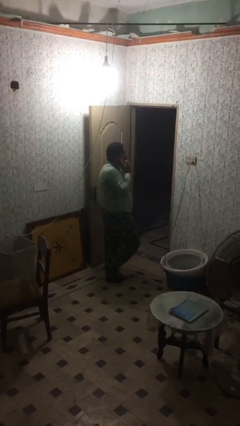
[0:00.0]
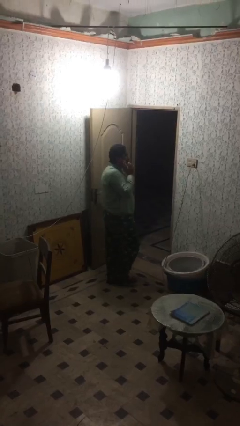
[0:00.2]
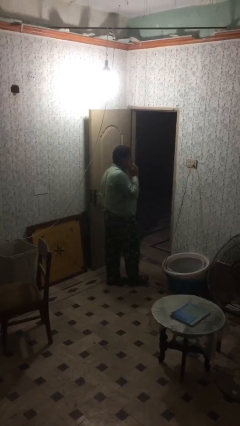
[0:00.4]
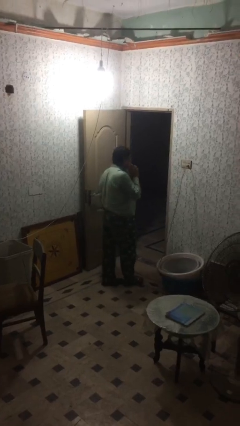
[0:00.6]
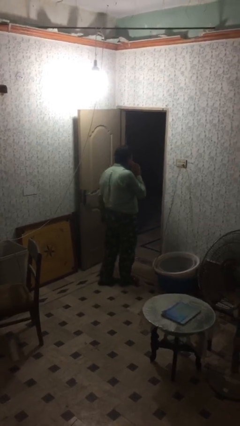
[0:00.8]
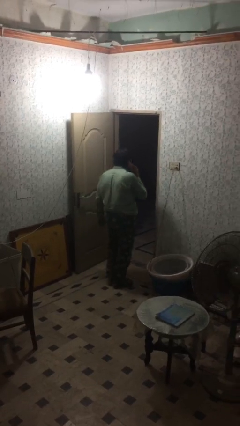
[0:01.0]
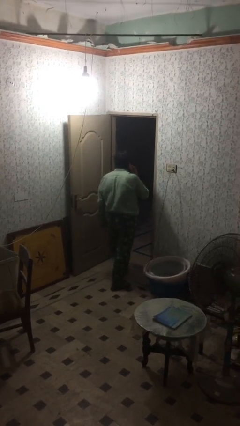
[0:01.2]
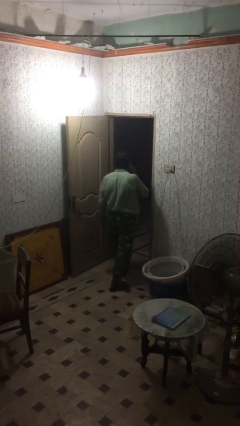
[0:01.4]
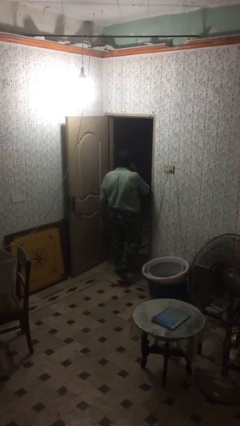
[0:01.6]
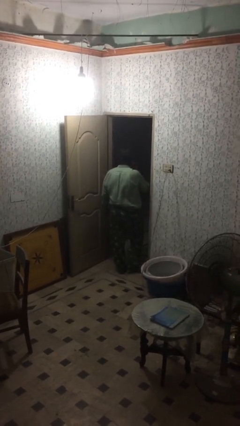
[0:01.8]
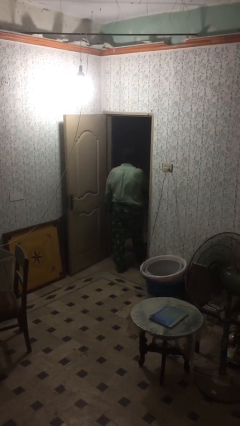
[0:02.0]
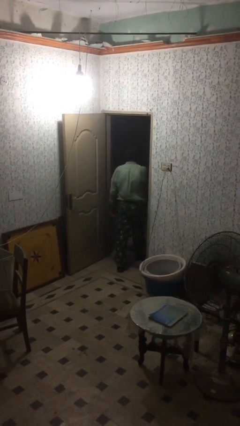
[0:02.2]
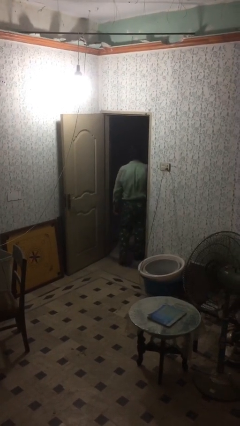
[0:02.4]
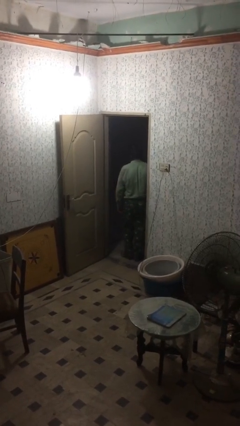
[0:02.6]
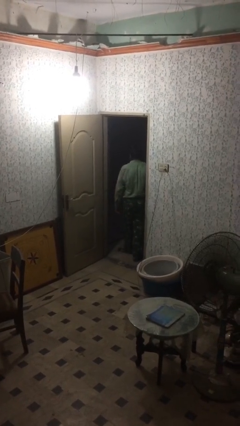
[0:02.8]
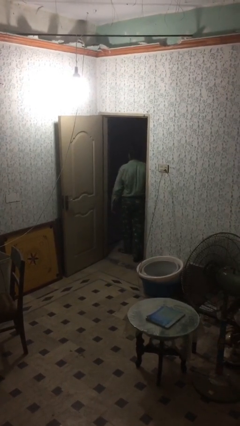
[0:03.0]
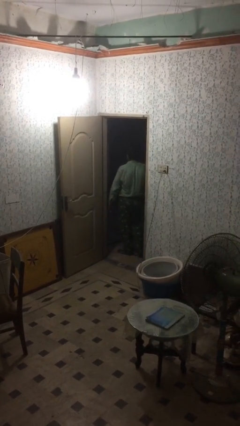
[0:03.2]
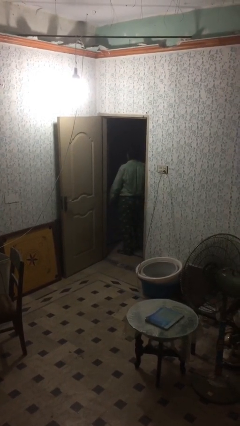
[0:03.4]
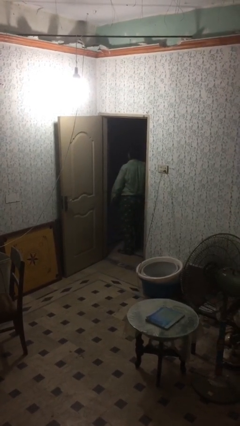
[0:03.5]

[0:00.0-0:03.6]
person exits scene through structure

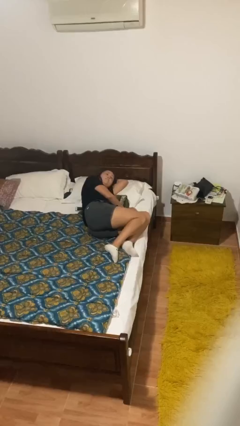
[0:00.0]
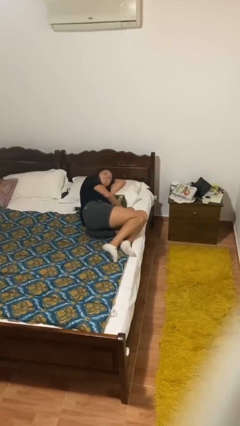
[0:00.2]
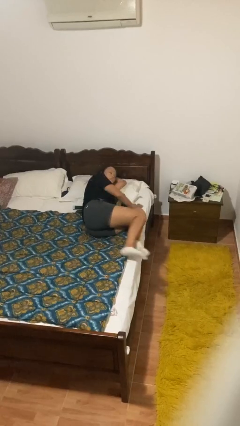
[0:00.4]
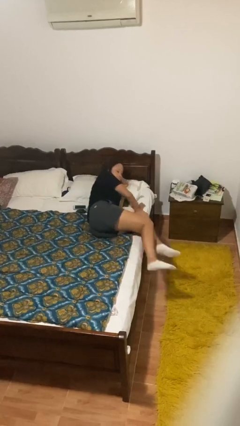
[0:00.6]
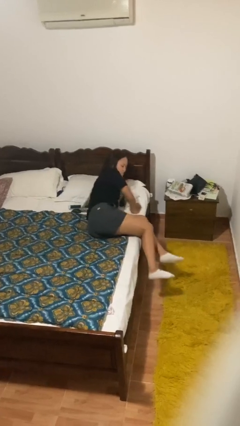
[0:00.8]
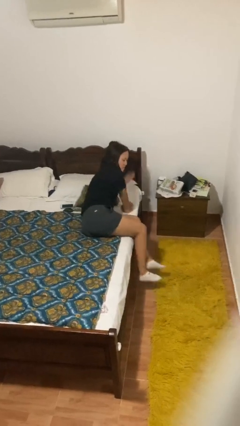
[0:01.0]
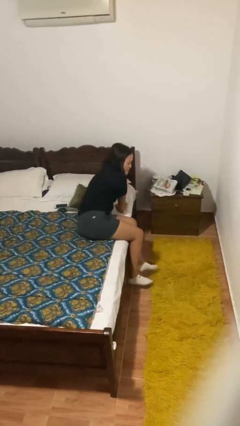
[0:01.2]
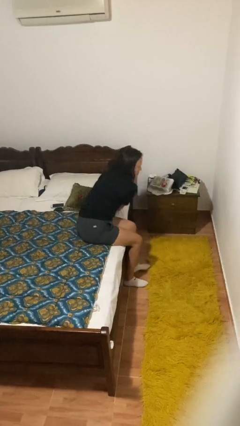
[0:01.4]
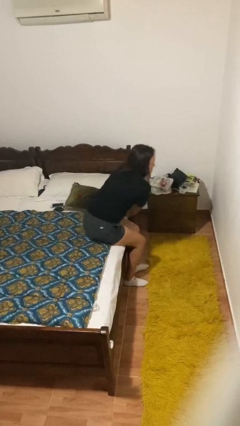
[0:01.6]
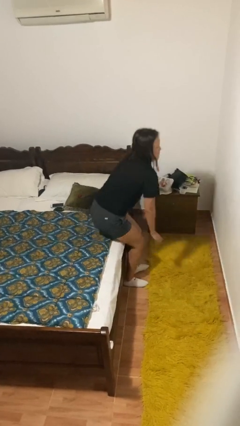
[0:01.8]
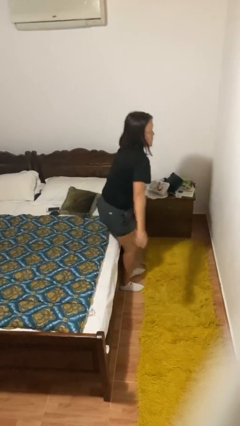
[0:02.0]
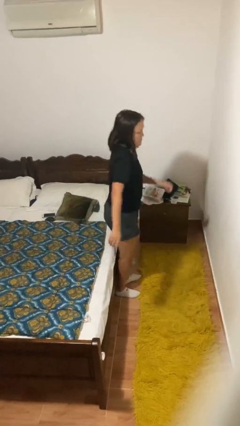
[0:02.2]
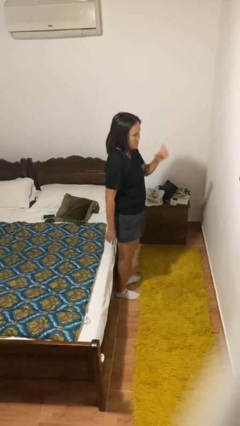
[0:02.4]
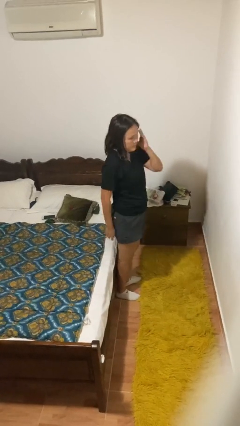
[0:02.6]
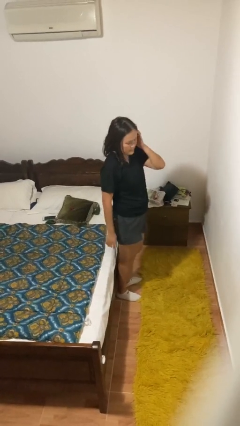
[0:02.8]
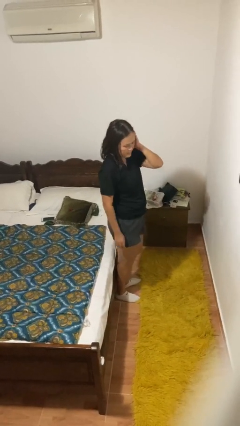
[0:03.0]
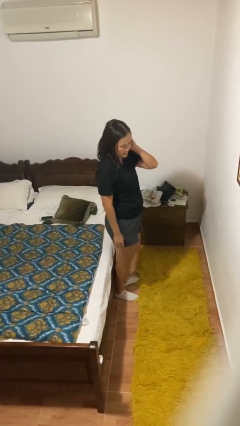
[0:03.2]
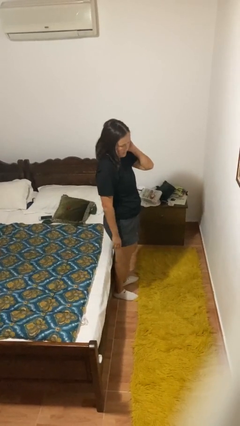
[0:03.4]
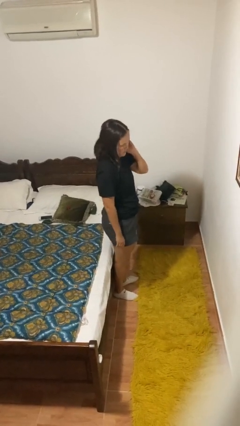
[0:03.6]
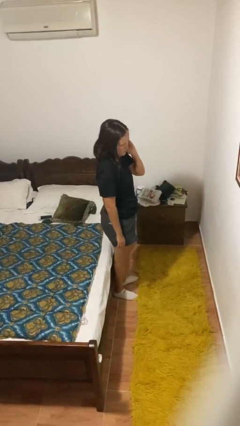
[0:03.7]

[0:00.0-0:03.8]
person stands up

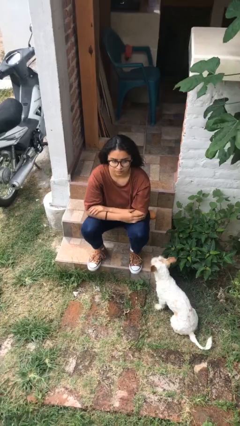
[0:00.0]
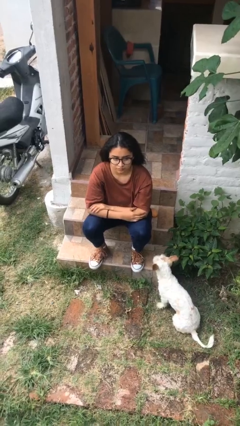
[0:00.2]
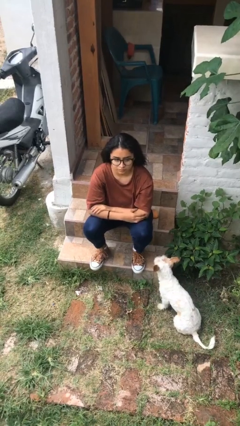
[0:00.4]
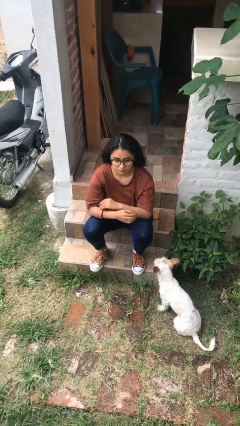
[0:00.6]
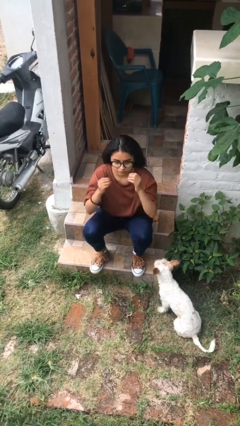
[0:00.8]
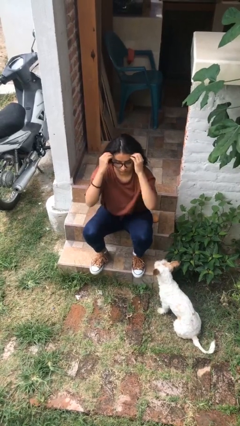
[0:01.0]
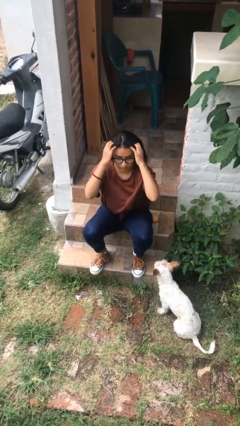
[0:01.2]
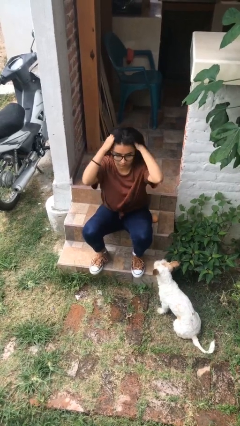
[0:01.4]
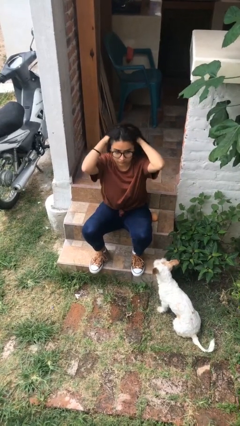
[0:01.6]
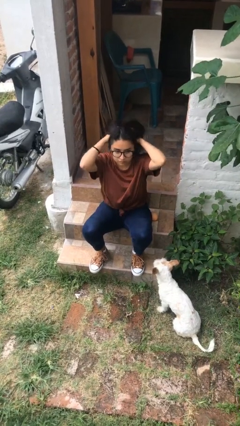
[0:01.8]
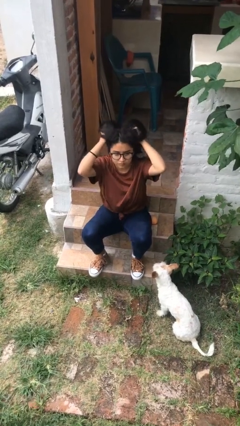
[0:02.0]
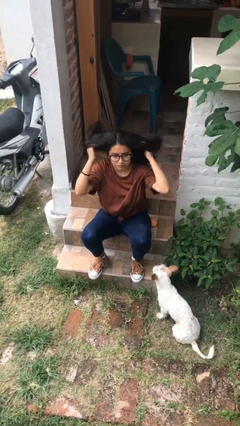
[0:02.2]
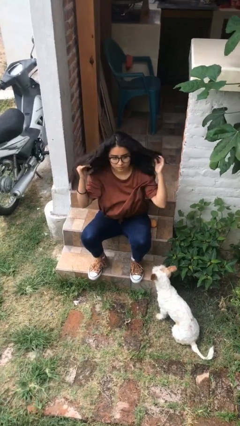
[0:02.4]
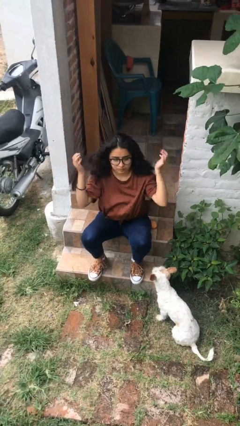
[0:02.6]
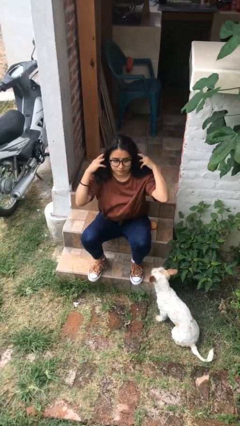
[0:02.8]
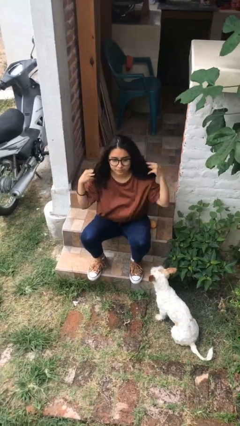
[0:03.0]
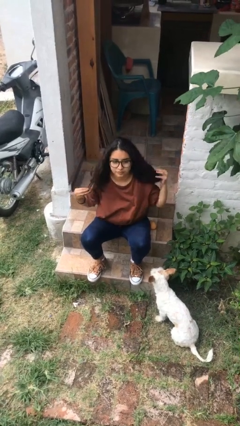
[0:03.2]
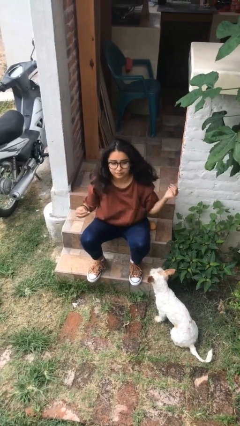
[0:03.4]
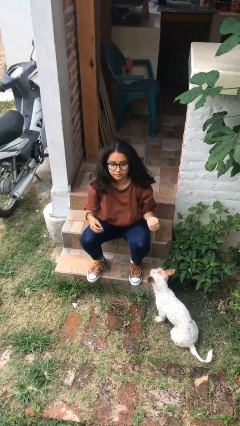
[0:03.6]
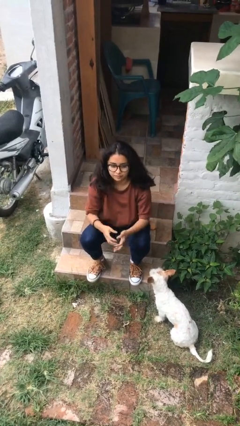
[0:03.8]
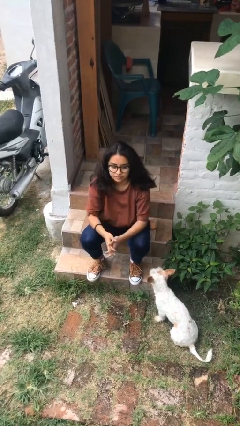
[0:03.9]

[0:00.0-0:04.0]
person strokes hair

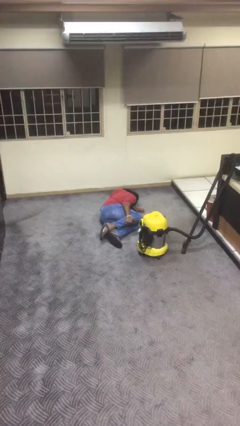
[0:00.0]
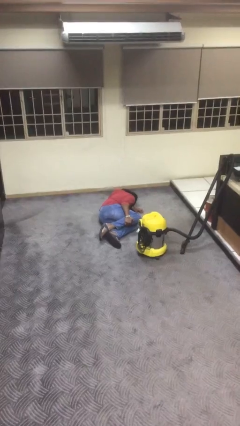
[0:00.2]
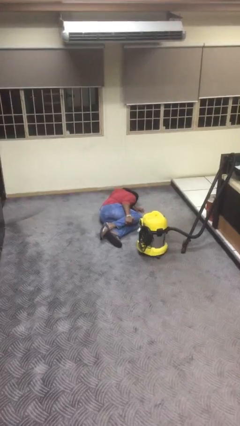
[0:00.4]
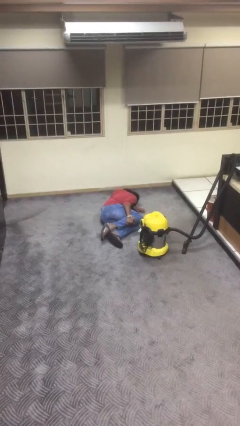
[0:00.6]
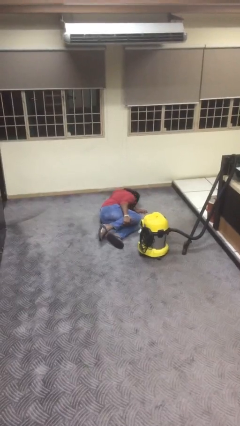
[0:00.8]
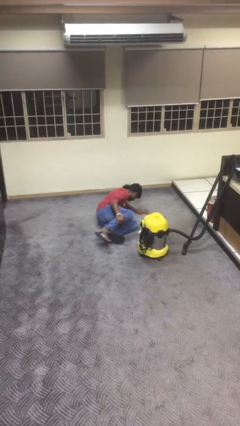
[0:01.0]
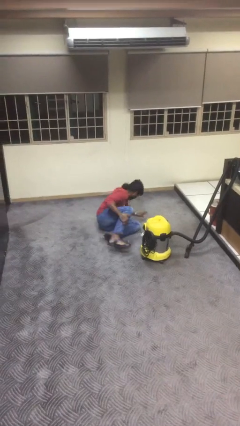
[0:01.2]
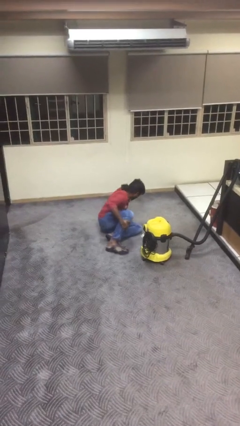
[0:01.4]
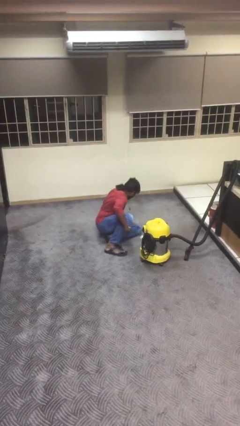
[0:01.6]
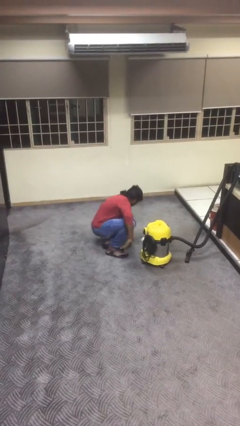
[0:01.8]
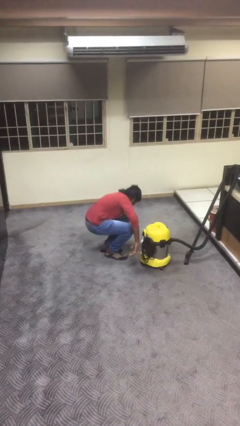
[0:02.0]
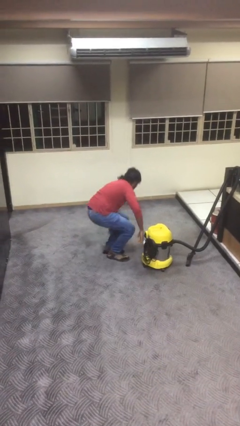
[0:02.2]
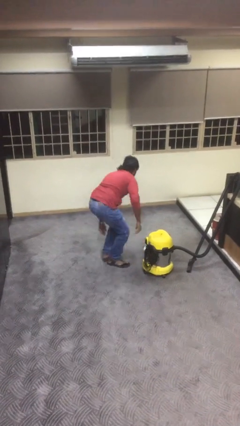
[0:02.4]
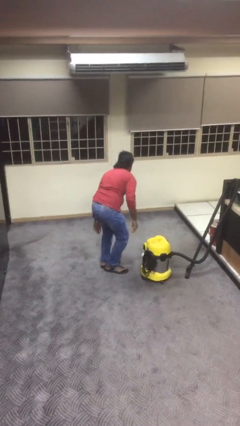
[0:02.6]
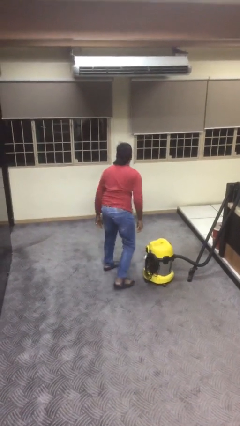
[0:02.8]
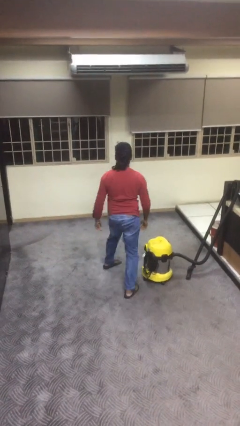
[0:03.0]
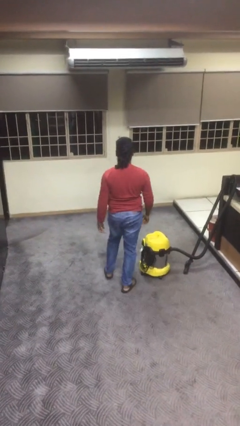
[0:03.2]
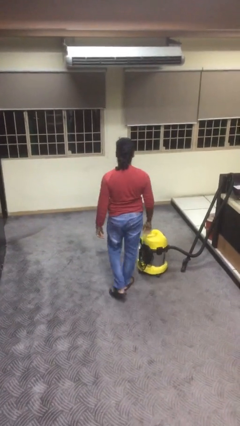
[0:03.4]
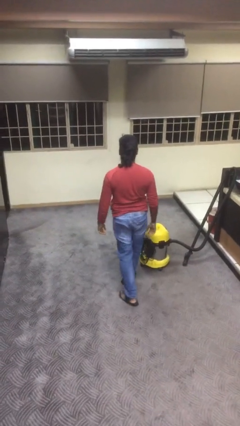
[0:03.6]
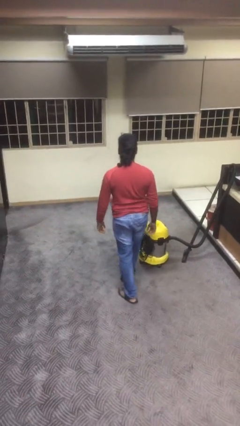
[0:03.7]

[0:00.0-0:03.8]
person stands up from floor

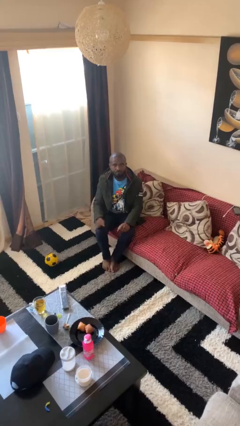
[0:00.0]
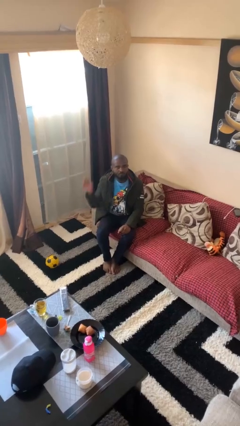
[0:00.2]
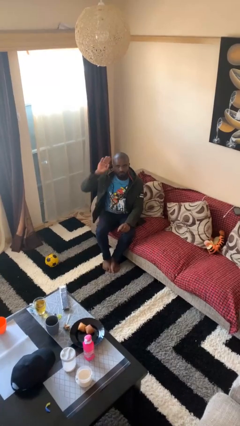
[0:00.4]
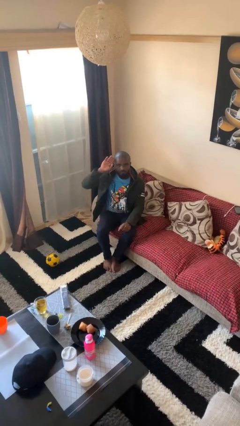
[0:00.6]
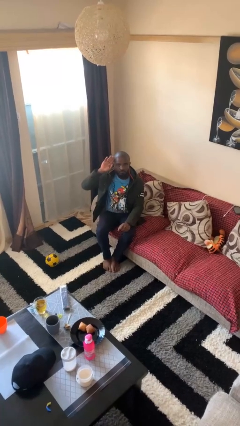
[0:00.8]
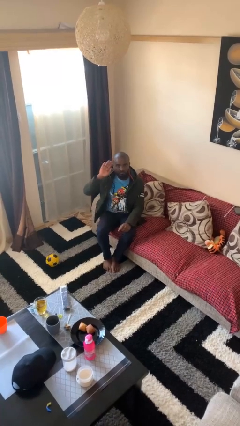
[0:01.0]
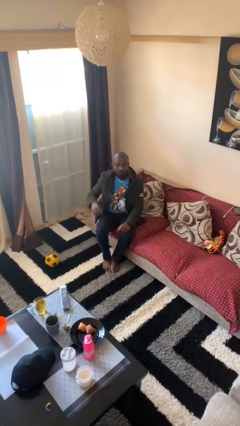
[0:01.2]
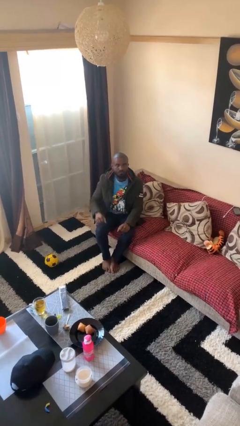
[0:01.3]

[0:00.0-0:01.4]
person salutes

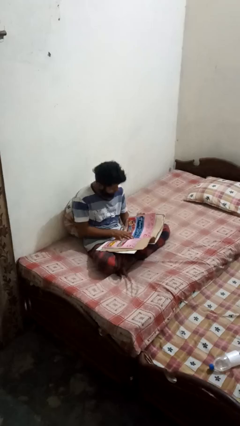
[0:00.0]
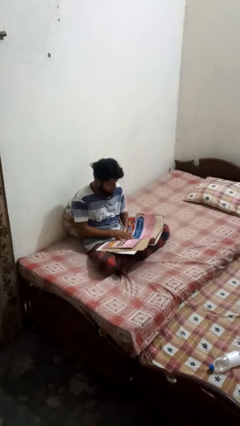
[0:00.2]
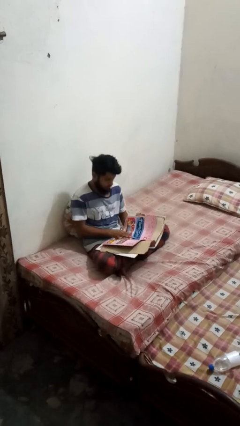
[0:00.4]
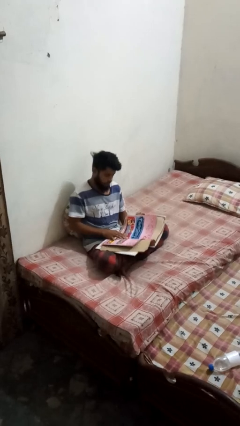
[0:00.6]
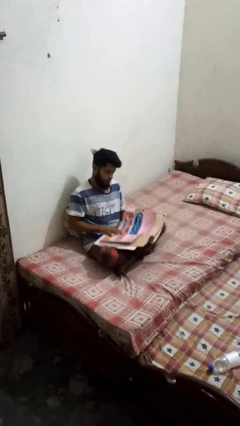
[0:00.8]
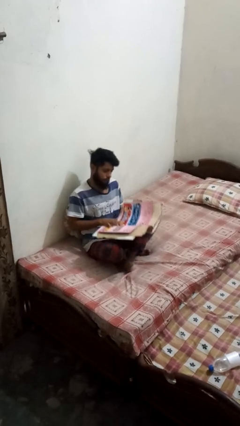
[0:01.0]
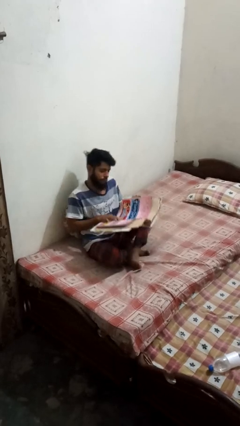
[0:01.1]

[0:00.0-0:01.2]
person reads magazine
